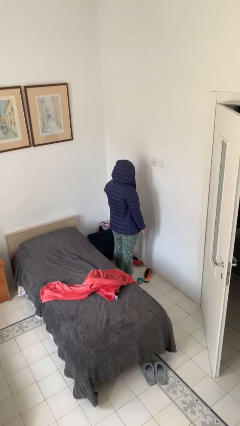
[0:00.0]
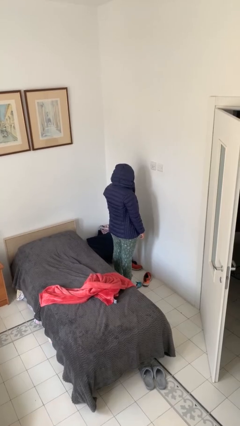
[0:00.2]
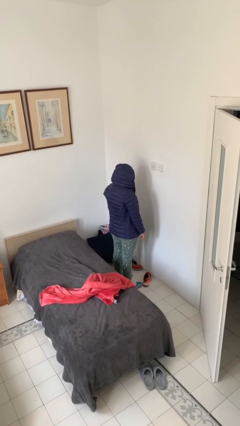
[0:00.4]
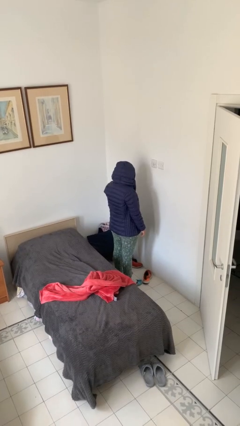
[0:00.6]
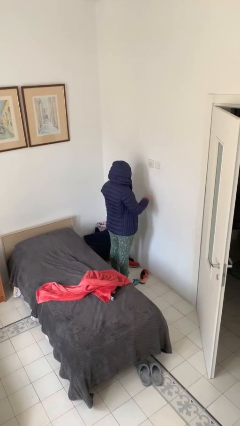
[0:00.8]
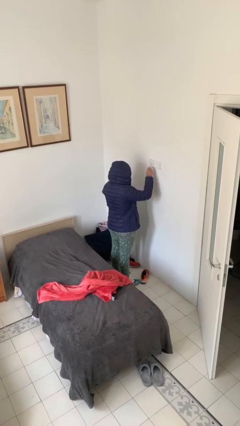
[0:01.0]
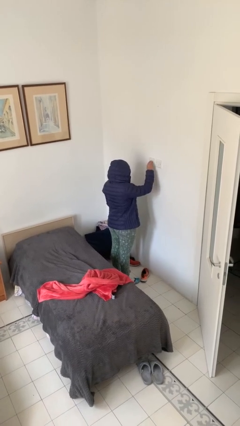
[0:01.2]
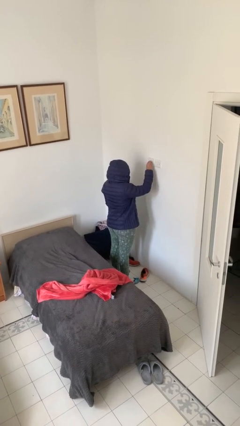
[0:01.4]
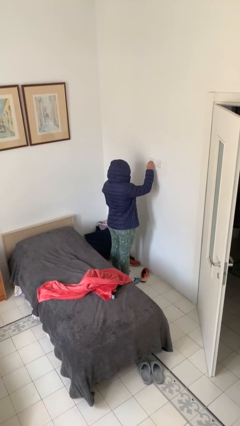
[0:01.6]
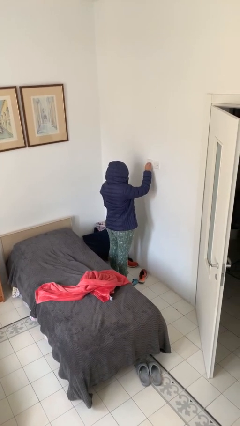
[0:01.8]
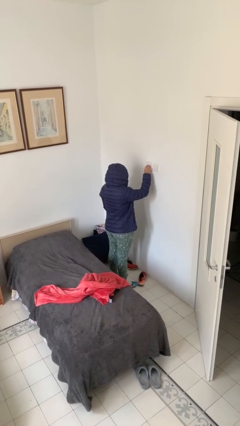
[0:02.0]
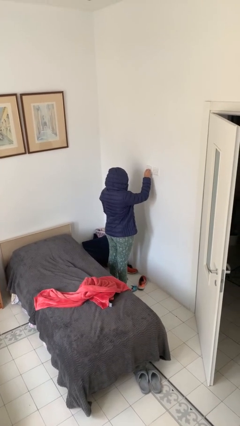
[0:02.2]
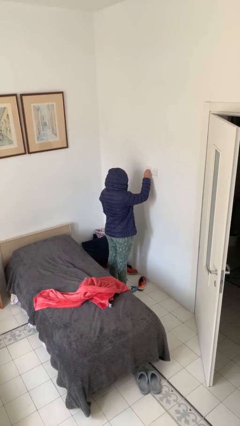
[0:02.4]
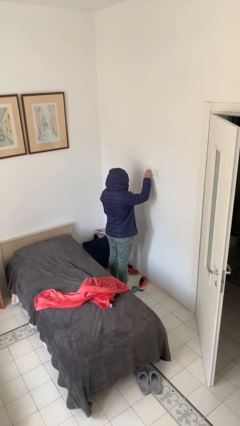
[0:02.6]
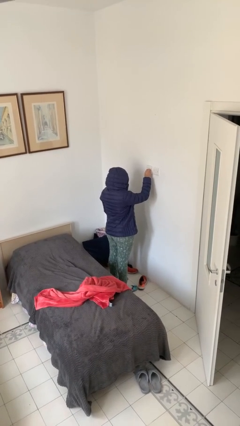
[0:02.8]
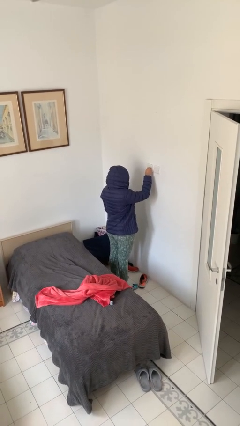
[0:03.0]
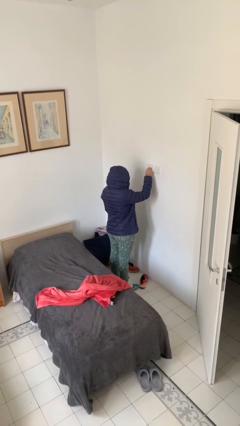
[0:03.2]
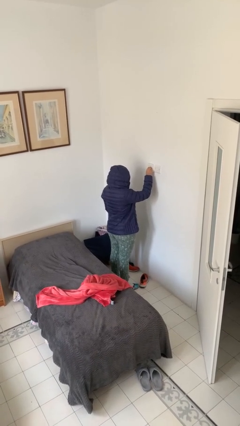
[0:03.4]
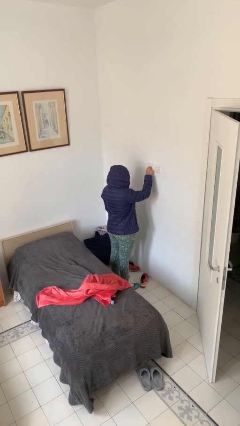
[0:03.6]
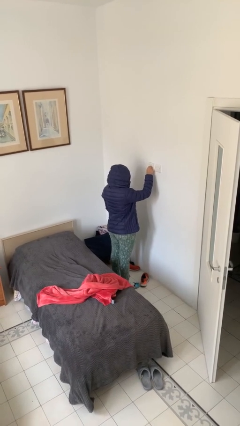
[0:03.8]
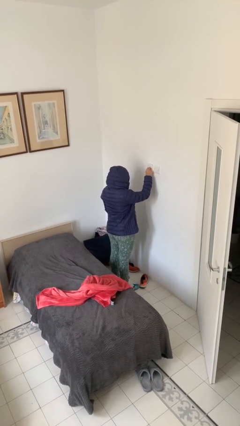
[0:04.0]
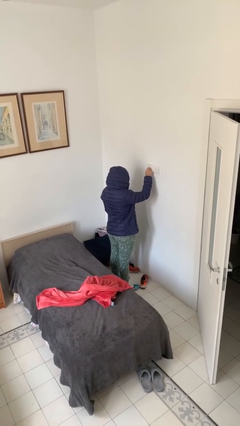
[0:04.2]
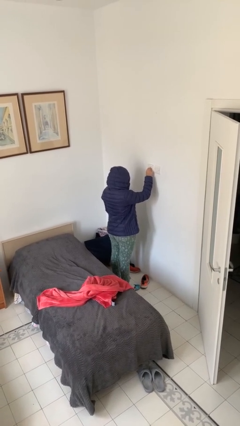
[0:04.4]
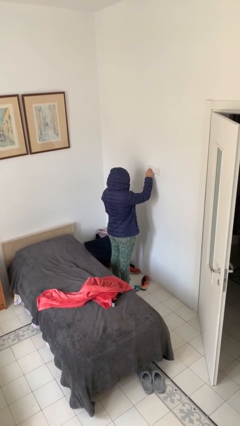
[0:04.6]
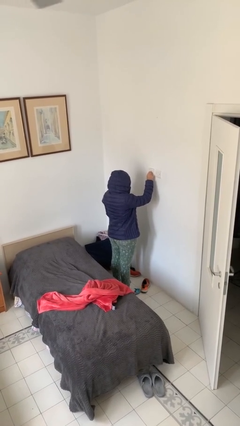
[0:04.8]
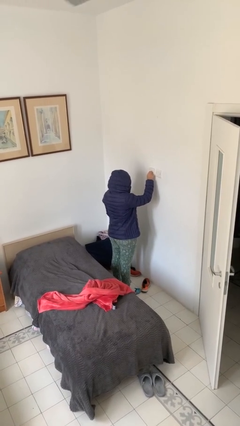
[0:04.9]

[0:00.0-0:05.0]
person turns on fan

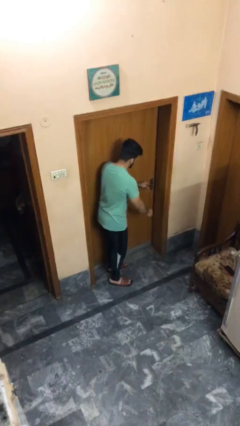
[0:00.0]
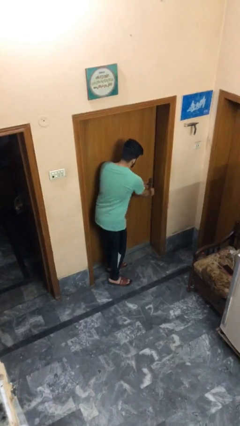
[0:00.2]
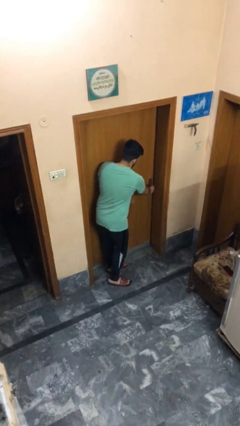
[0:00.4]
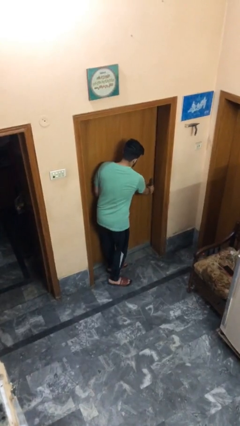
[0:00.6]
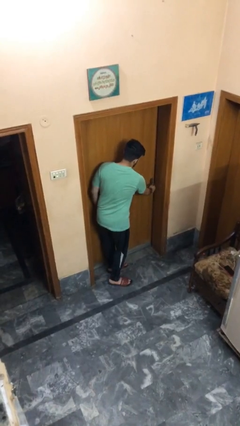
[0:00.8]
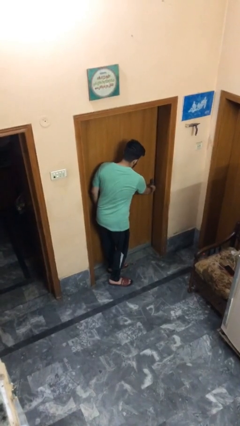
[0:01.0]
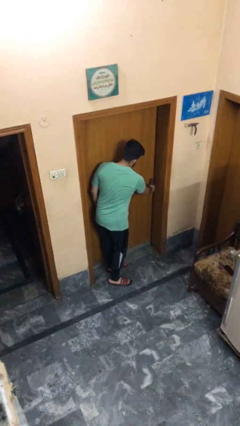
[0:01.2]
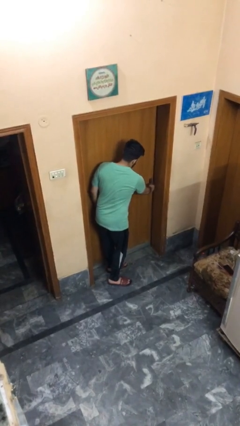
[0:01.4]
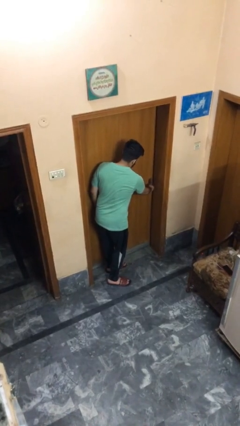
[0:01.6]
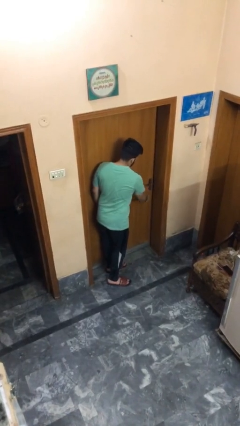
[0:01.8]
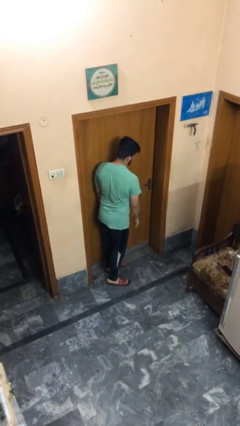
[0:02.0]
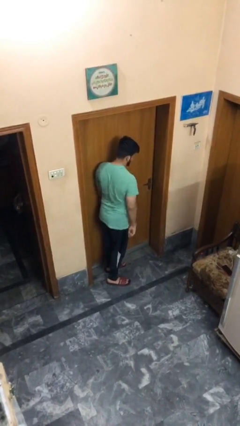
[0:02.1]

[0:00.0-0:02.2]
person locks door with keys

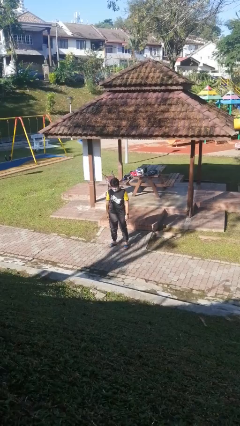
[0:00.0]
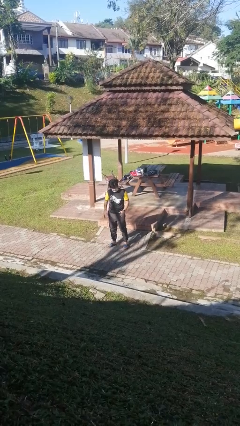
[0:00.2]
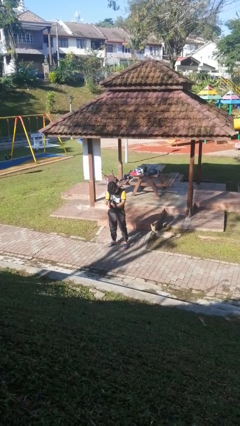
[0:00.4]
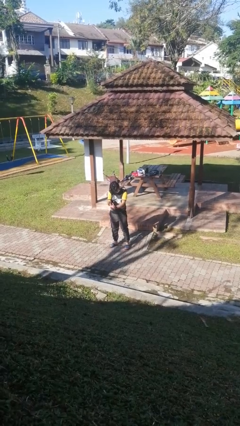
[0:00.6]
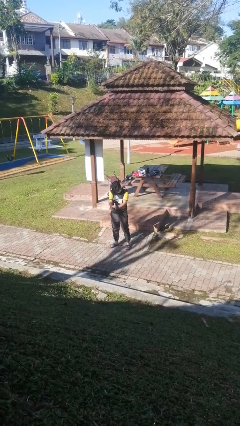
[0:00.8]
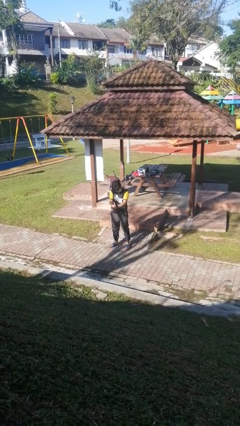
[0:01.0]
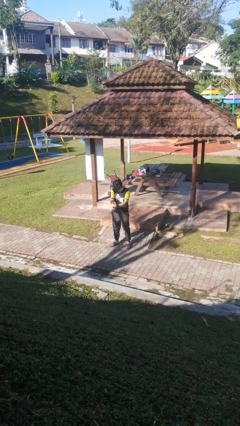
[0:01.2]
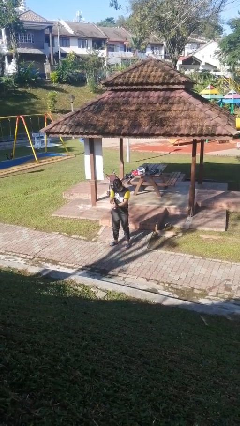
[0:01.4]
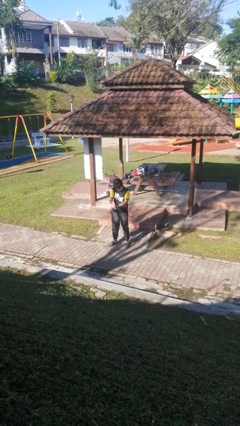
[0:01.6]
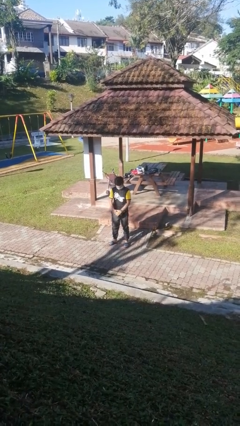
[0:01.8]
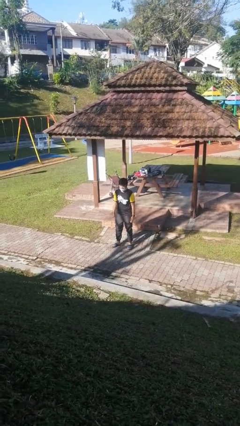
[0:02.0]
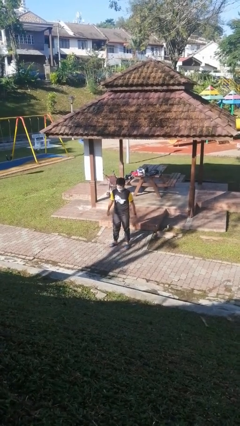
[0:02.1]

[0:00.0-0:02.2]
person claps hands

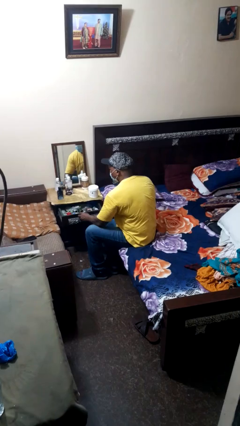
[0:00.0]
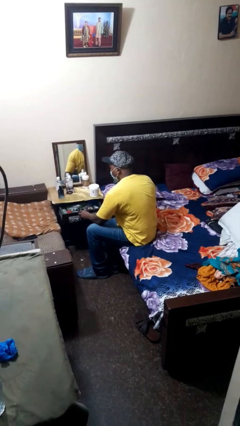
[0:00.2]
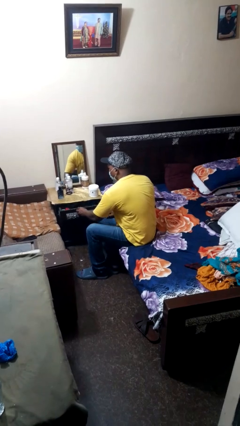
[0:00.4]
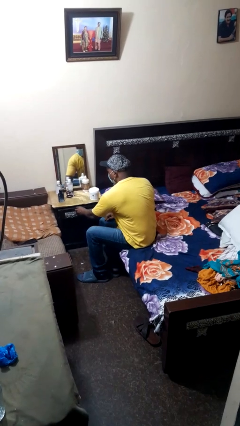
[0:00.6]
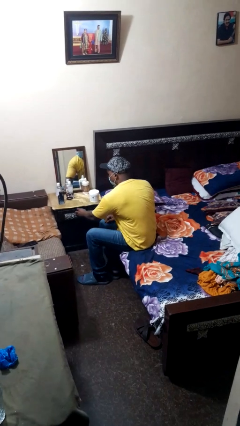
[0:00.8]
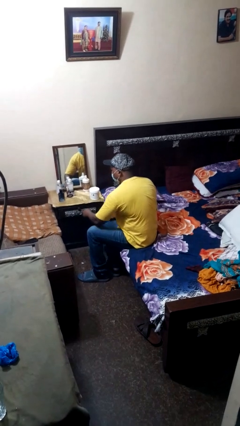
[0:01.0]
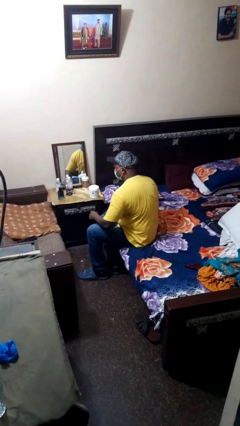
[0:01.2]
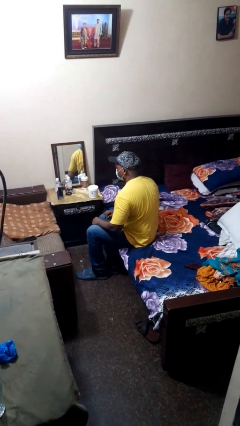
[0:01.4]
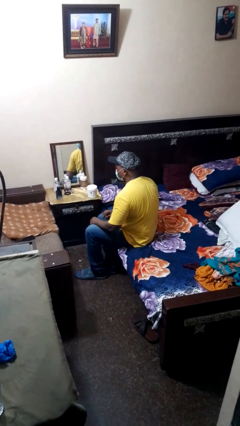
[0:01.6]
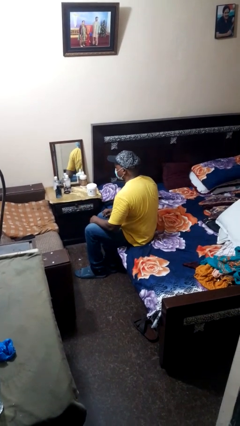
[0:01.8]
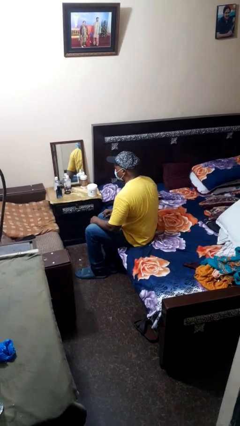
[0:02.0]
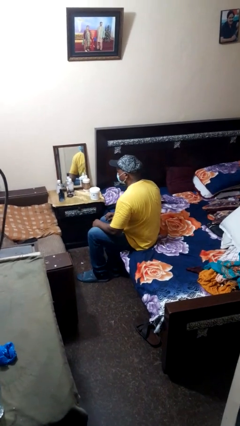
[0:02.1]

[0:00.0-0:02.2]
person closes dresser drawer

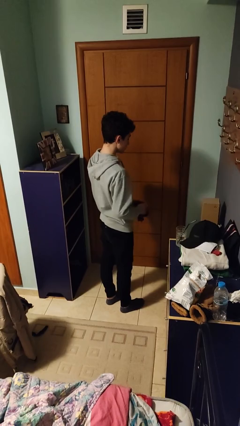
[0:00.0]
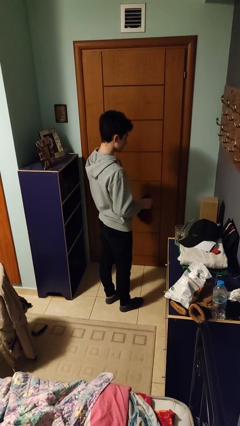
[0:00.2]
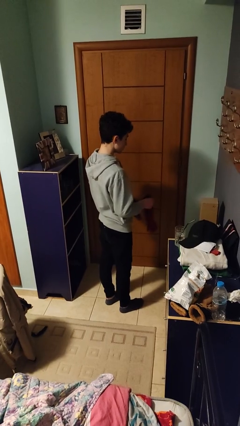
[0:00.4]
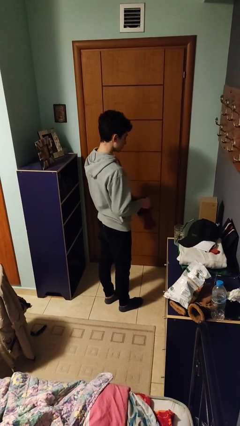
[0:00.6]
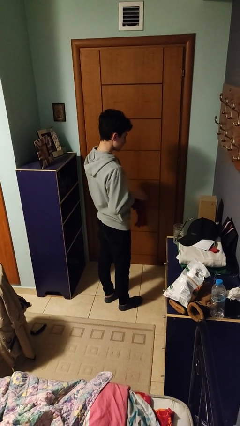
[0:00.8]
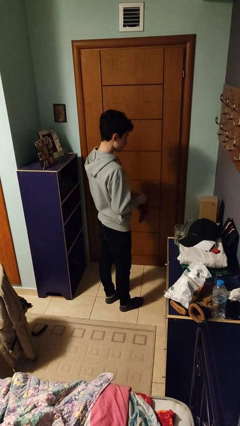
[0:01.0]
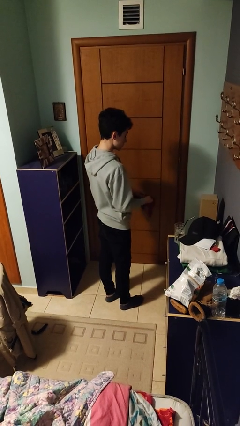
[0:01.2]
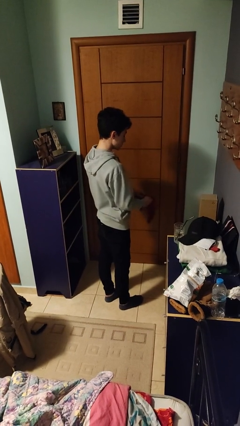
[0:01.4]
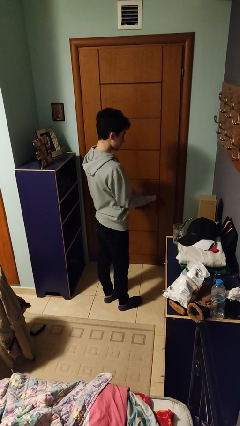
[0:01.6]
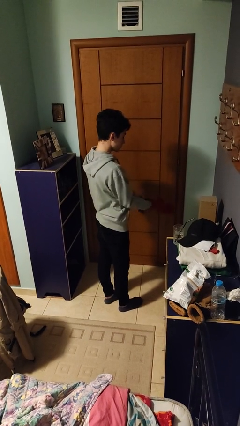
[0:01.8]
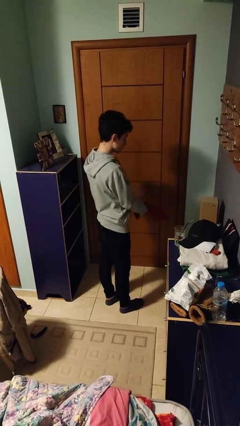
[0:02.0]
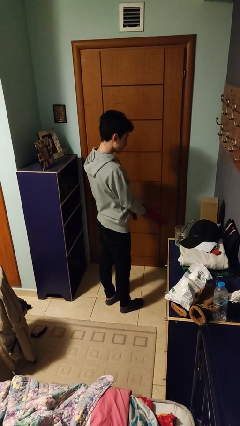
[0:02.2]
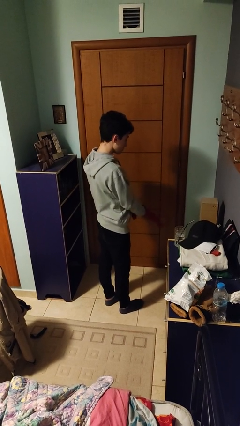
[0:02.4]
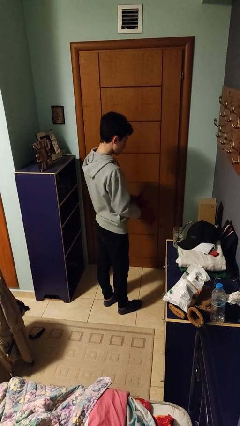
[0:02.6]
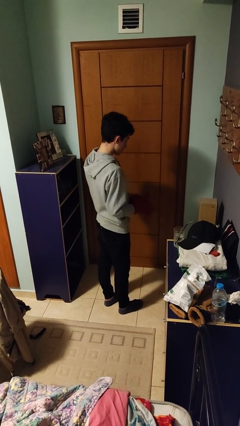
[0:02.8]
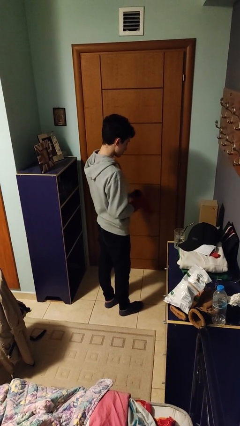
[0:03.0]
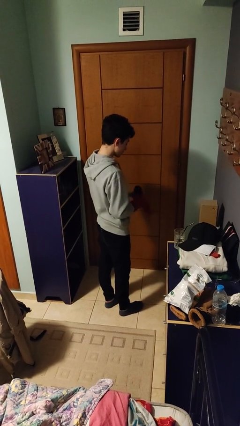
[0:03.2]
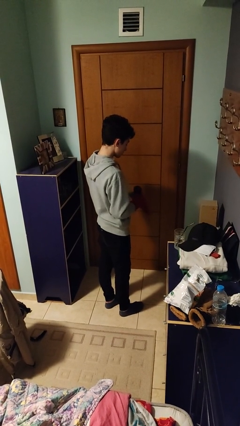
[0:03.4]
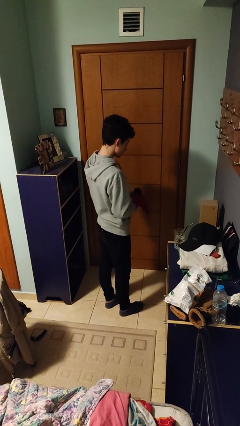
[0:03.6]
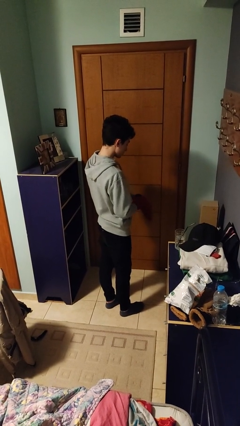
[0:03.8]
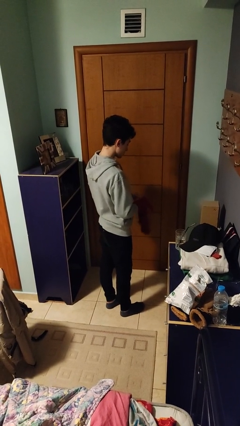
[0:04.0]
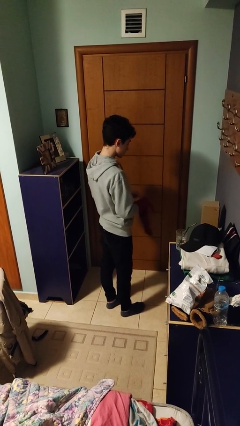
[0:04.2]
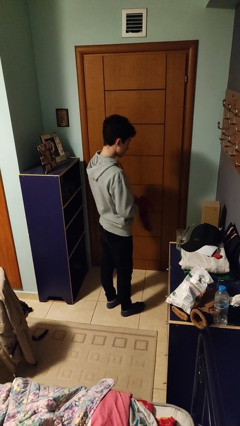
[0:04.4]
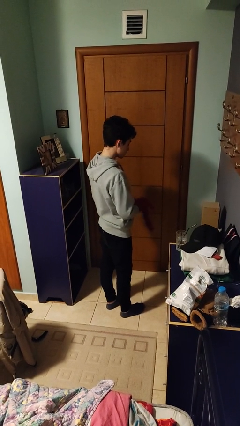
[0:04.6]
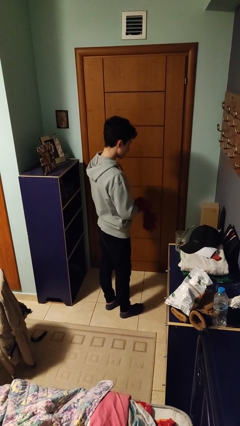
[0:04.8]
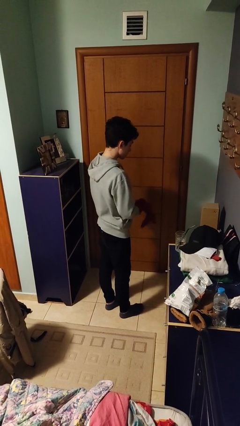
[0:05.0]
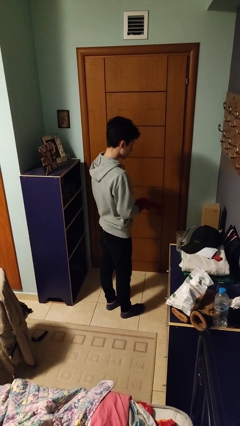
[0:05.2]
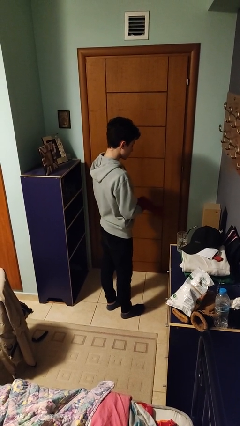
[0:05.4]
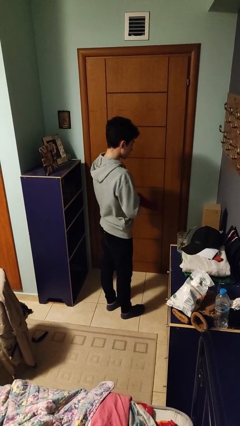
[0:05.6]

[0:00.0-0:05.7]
person puts on gloves

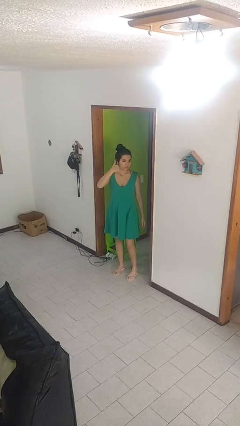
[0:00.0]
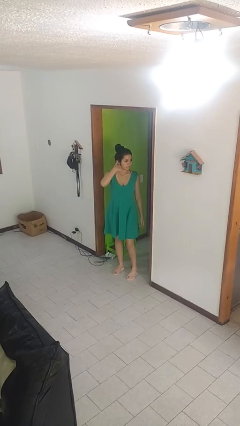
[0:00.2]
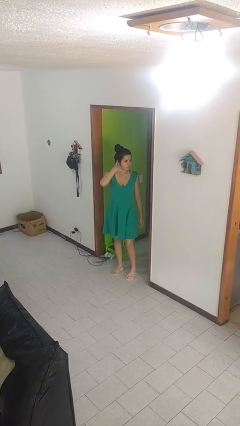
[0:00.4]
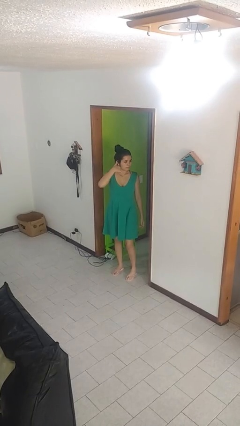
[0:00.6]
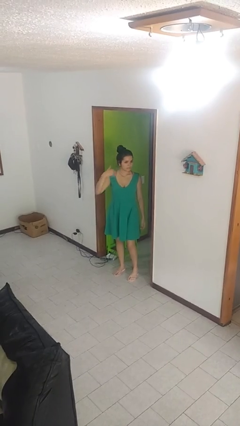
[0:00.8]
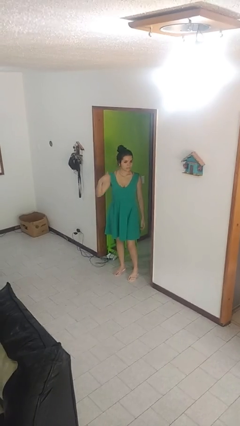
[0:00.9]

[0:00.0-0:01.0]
person gestures call me
